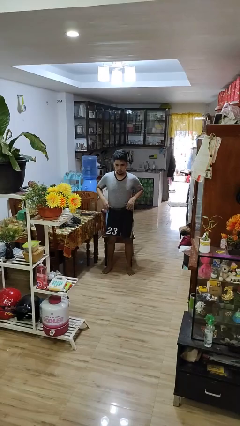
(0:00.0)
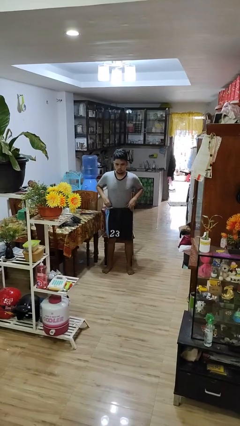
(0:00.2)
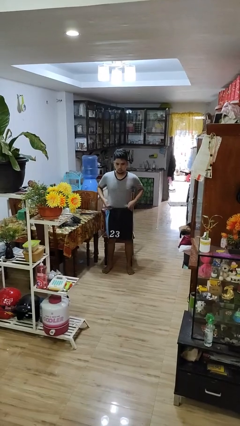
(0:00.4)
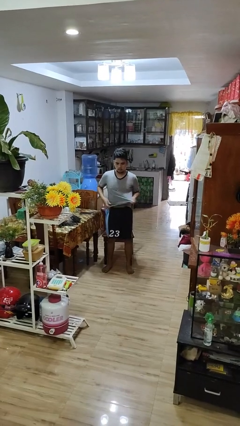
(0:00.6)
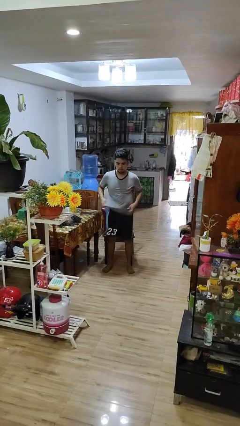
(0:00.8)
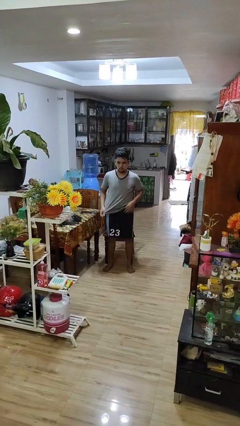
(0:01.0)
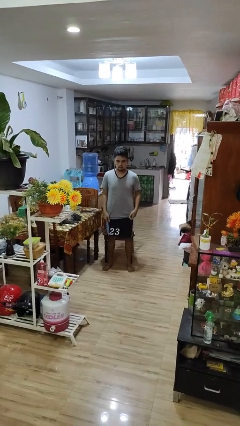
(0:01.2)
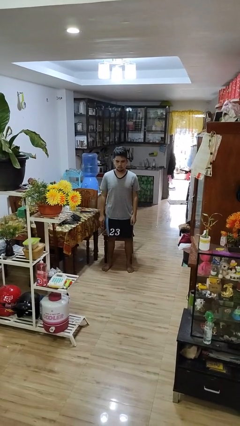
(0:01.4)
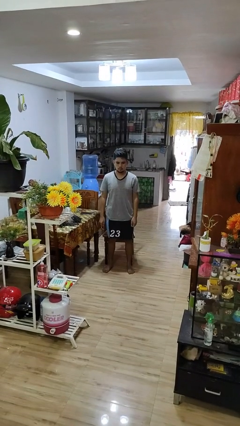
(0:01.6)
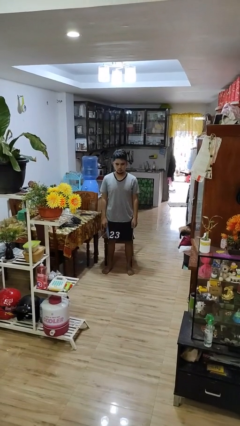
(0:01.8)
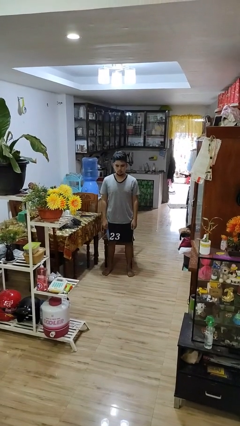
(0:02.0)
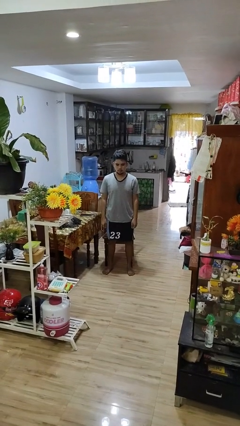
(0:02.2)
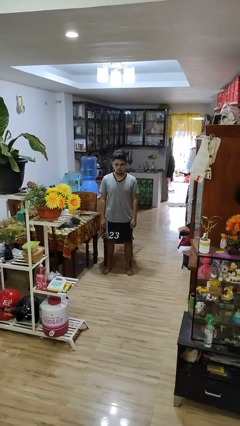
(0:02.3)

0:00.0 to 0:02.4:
person untucks shirt

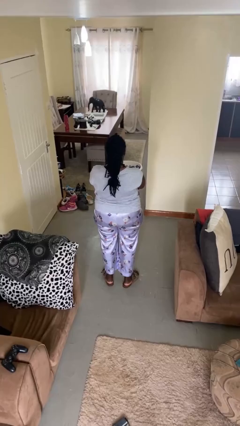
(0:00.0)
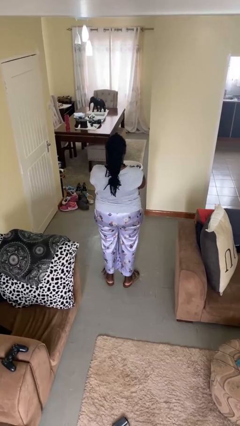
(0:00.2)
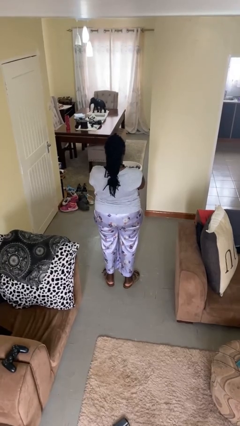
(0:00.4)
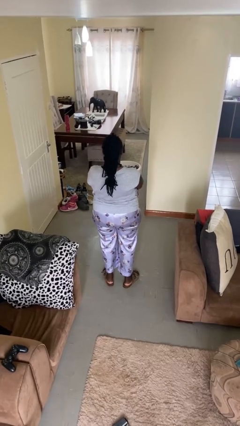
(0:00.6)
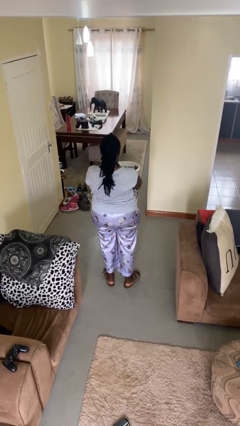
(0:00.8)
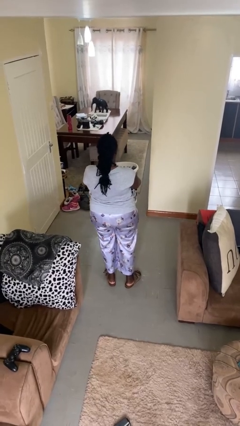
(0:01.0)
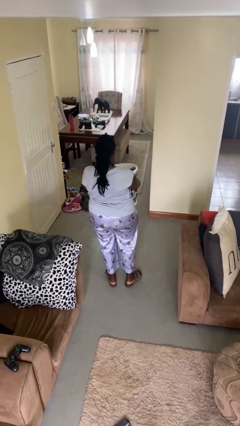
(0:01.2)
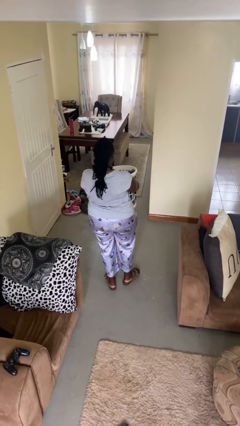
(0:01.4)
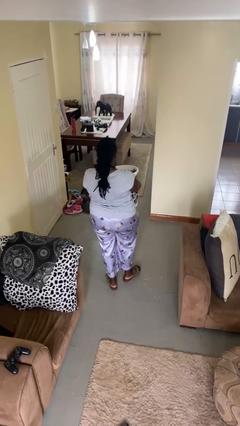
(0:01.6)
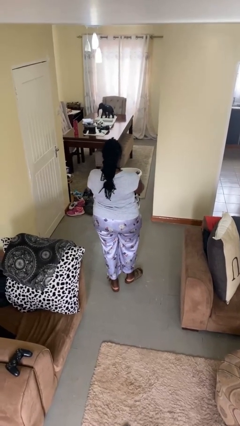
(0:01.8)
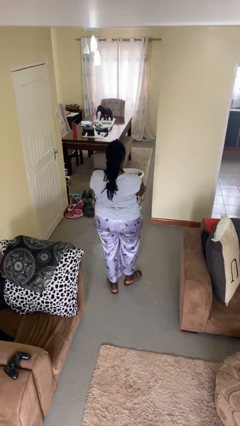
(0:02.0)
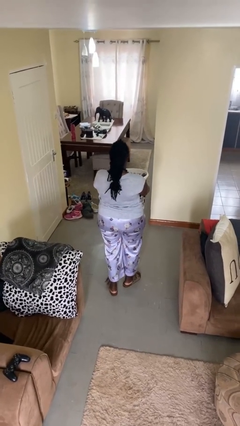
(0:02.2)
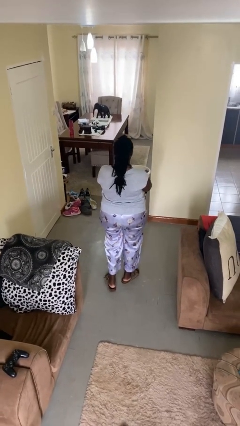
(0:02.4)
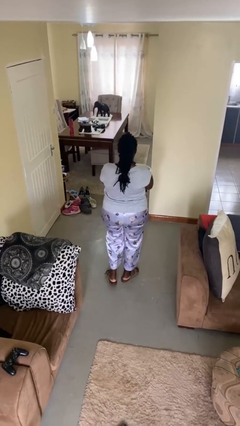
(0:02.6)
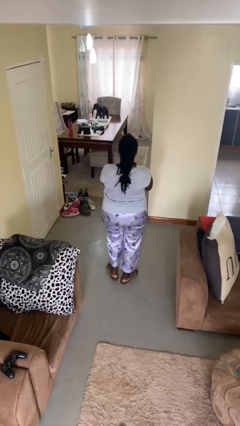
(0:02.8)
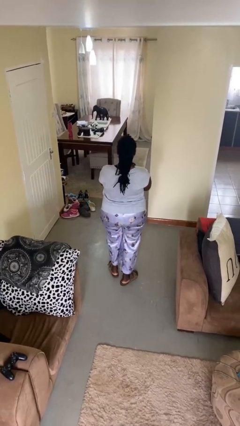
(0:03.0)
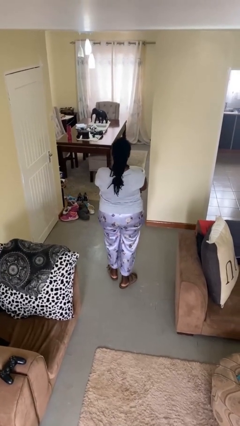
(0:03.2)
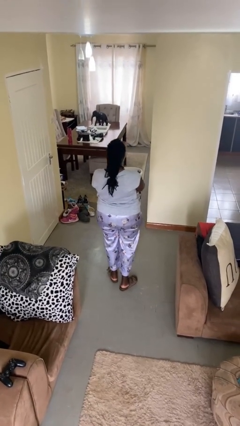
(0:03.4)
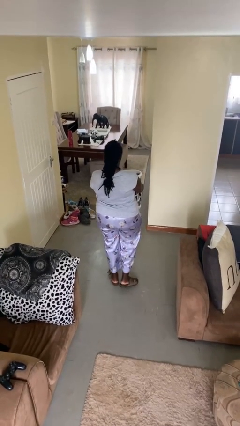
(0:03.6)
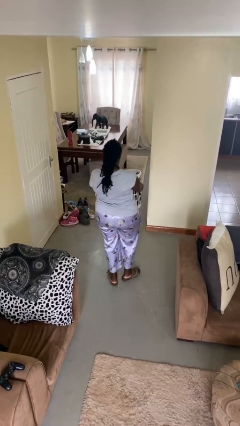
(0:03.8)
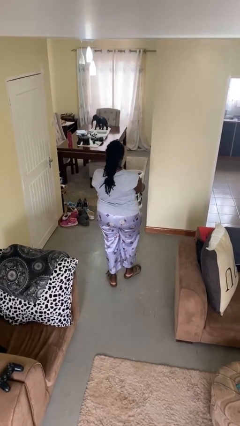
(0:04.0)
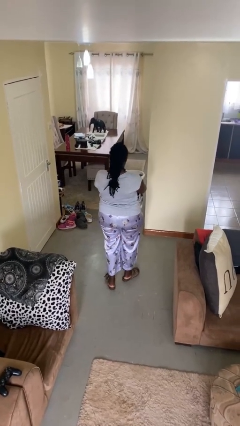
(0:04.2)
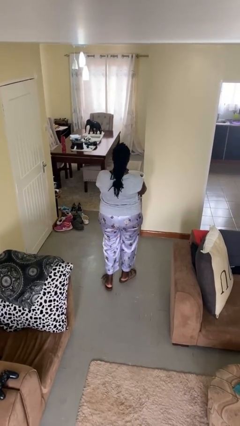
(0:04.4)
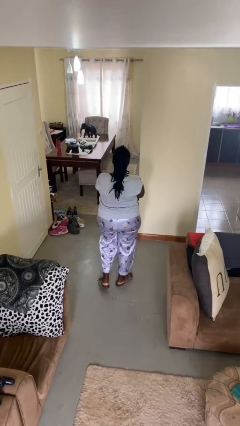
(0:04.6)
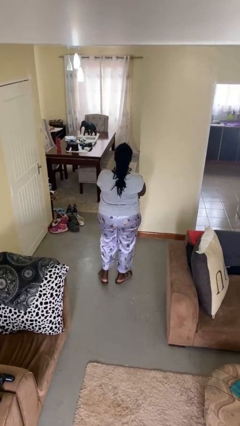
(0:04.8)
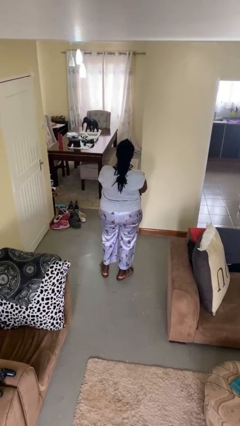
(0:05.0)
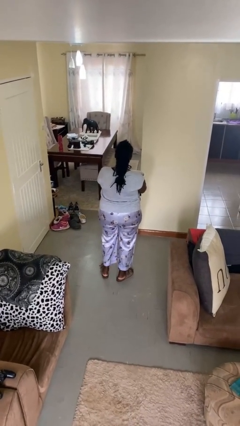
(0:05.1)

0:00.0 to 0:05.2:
person carries laundry basket

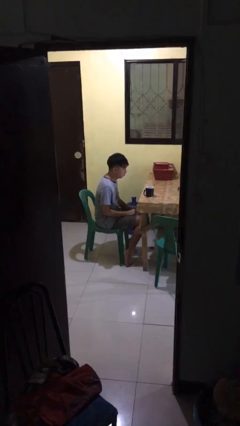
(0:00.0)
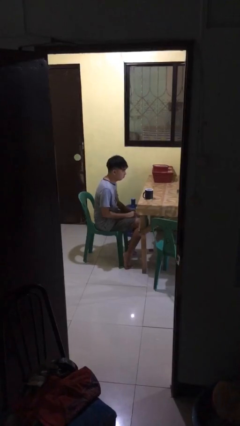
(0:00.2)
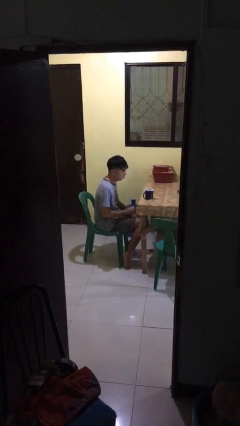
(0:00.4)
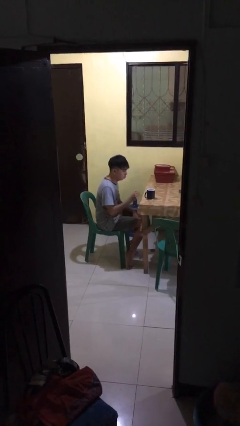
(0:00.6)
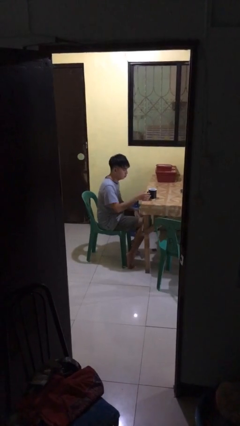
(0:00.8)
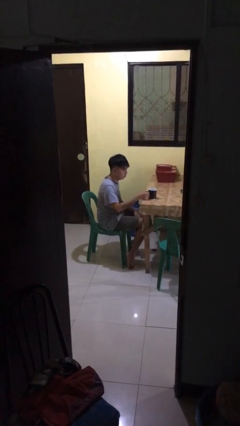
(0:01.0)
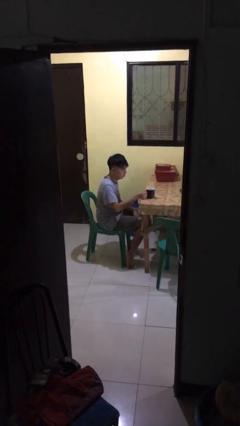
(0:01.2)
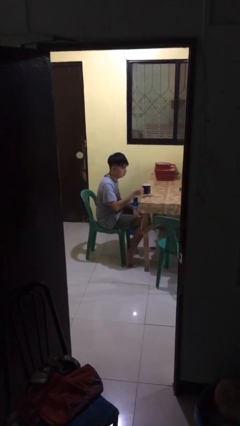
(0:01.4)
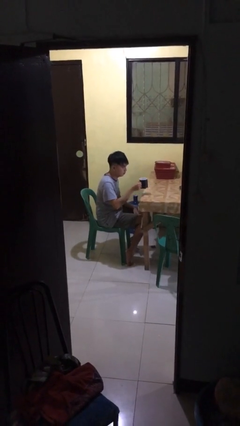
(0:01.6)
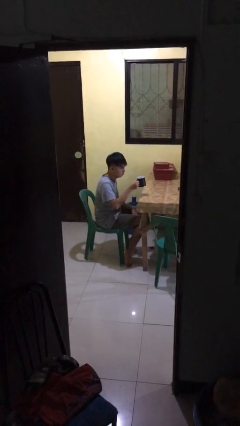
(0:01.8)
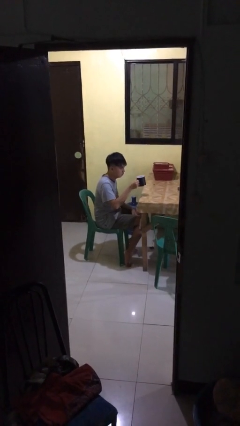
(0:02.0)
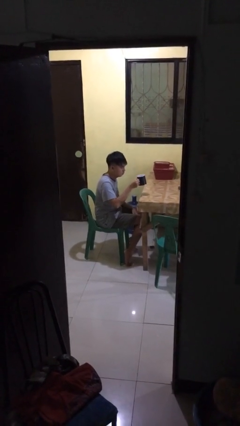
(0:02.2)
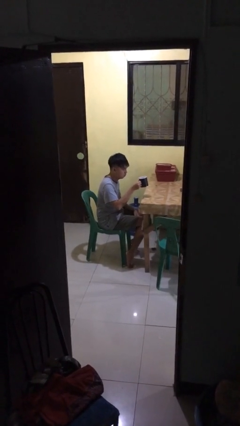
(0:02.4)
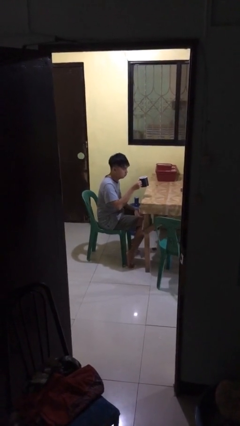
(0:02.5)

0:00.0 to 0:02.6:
person picks up object from table

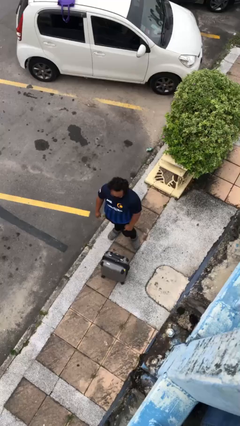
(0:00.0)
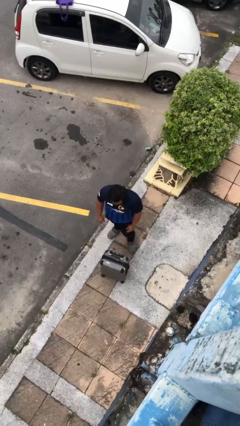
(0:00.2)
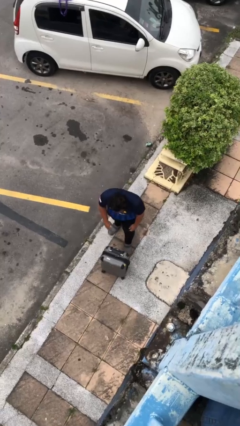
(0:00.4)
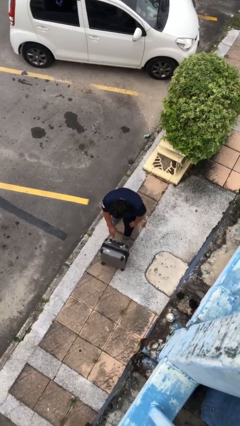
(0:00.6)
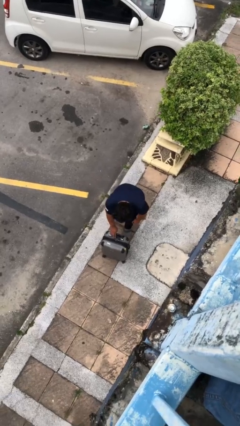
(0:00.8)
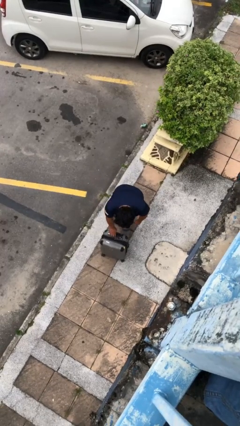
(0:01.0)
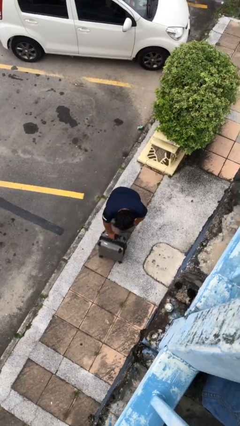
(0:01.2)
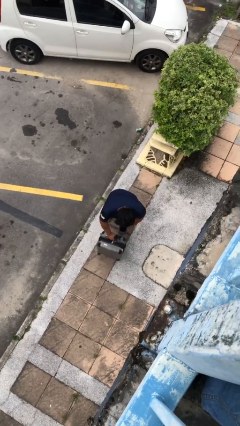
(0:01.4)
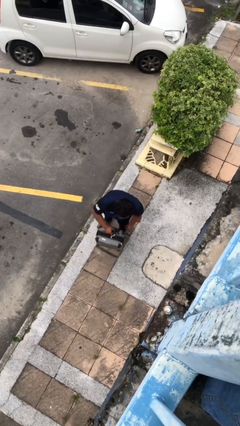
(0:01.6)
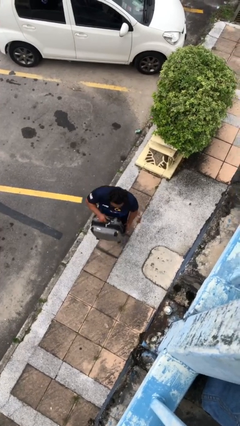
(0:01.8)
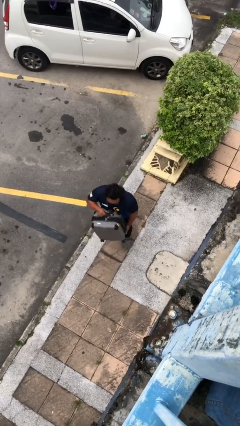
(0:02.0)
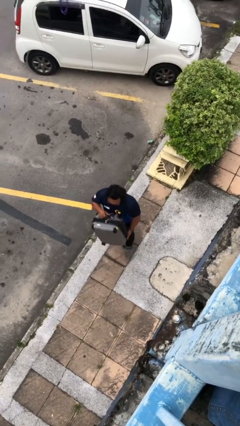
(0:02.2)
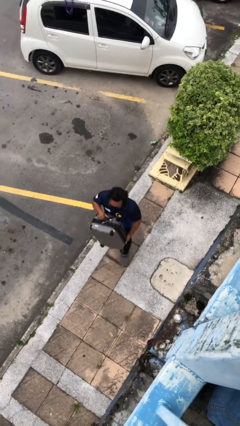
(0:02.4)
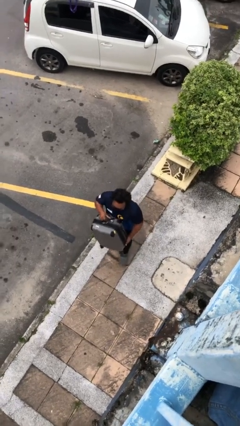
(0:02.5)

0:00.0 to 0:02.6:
person picks up object from floor

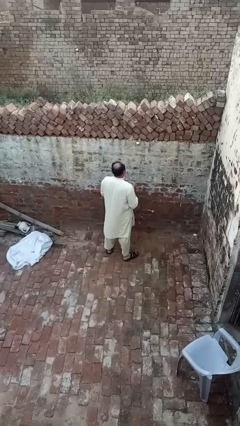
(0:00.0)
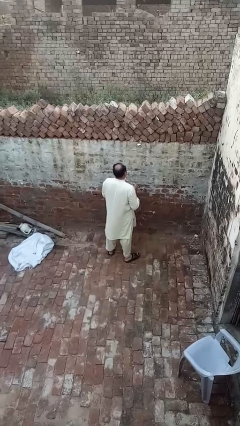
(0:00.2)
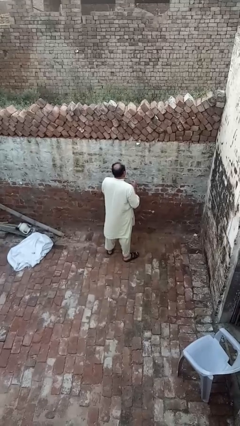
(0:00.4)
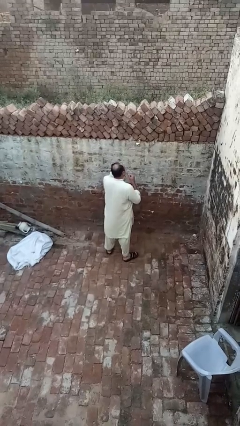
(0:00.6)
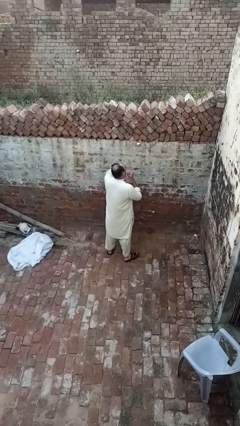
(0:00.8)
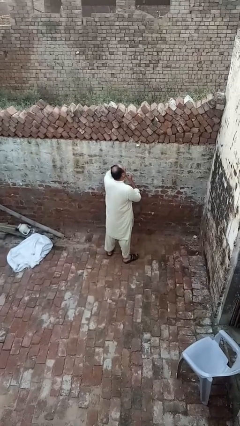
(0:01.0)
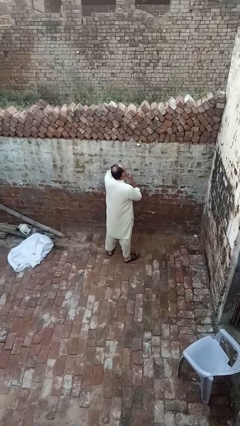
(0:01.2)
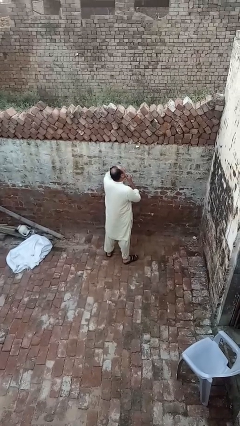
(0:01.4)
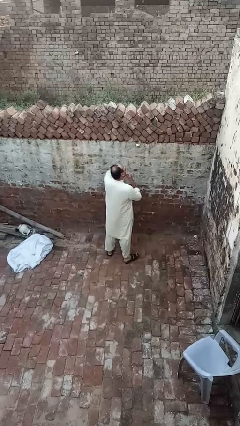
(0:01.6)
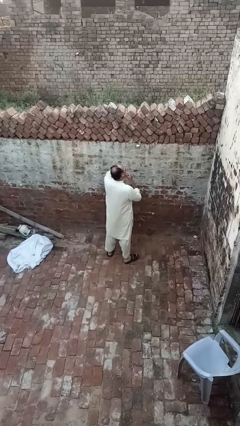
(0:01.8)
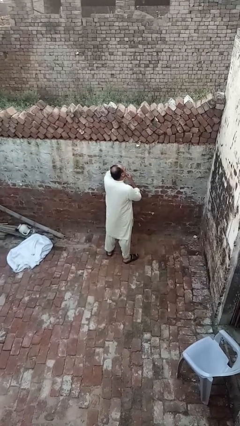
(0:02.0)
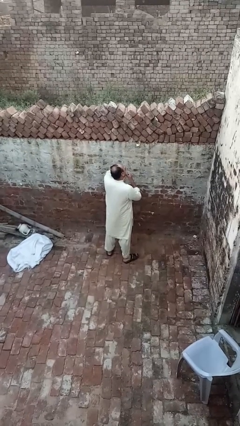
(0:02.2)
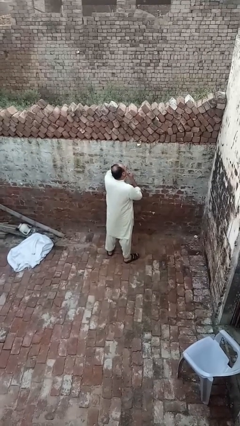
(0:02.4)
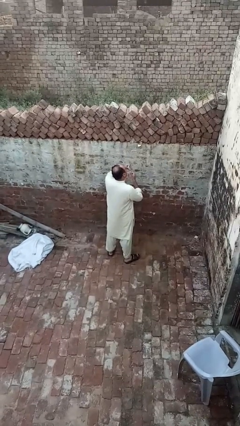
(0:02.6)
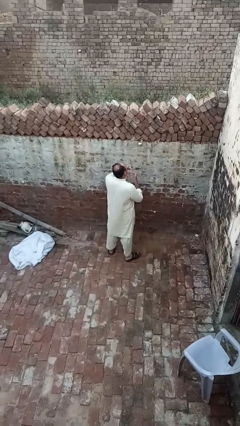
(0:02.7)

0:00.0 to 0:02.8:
person flosses

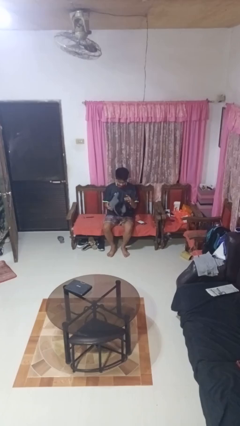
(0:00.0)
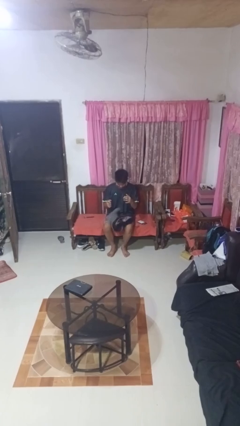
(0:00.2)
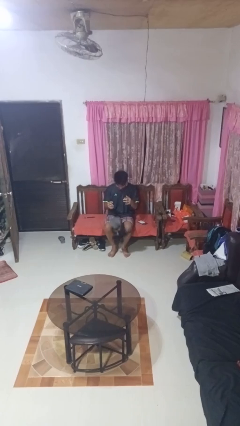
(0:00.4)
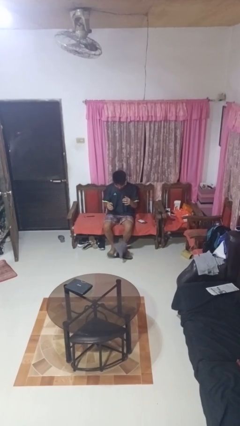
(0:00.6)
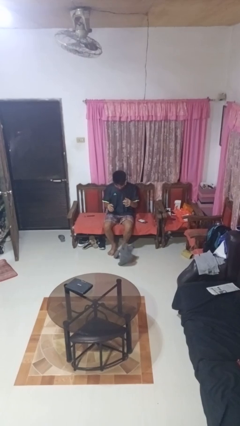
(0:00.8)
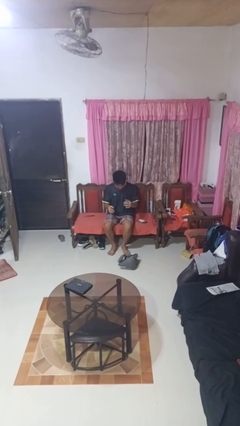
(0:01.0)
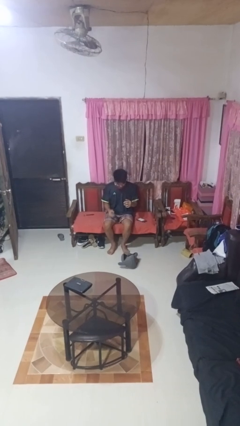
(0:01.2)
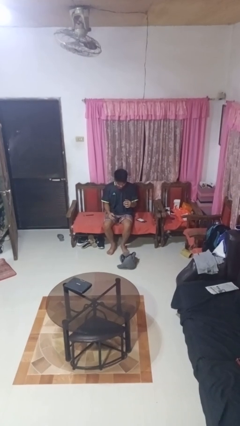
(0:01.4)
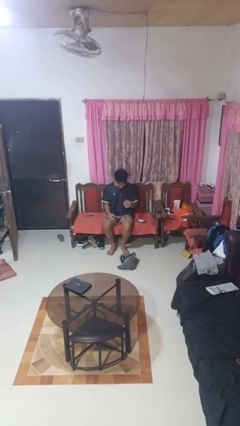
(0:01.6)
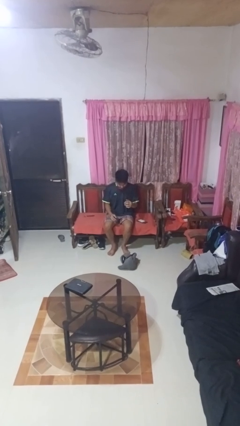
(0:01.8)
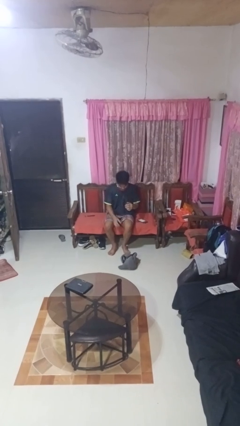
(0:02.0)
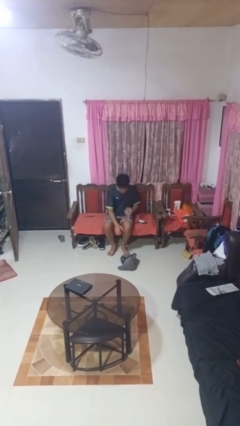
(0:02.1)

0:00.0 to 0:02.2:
person drops object
